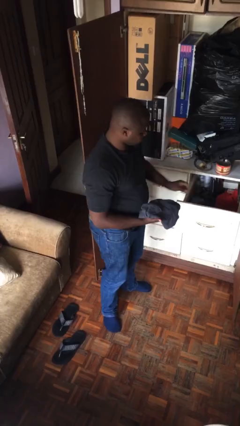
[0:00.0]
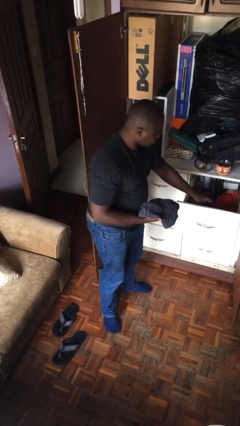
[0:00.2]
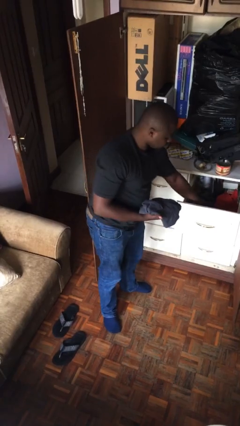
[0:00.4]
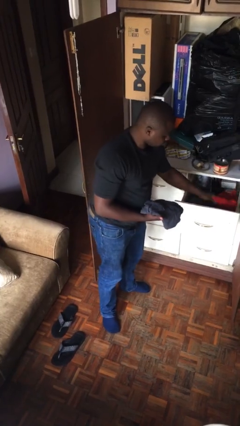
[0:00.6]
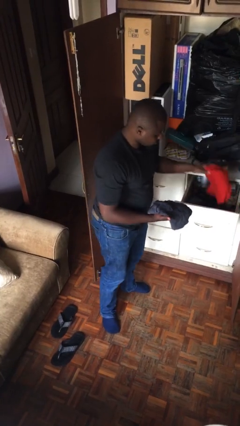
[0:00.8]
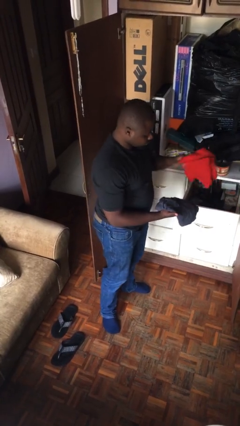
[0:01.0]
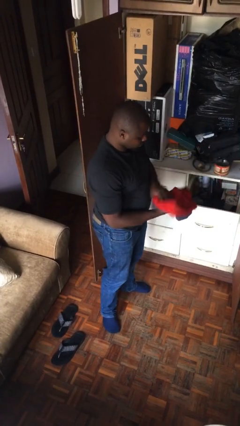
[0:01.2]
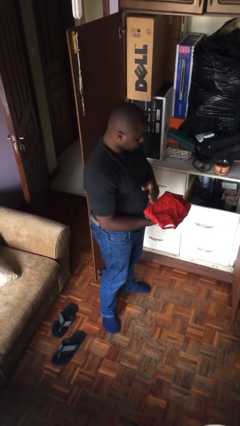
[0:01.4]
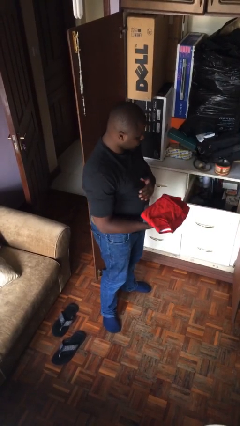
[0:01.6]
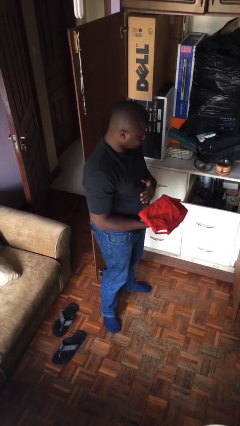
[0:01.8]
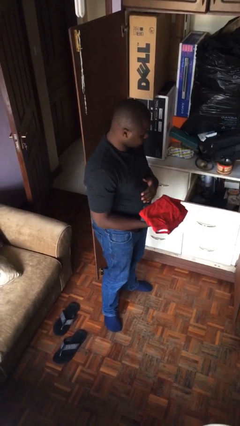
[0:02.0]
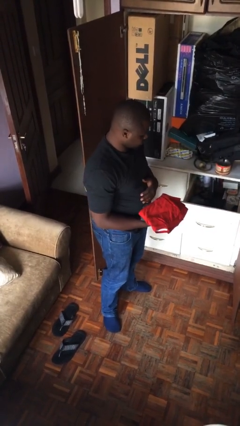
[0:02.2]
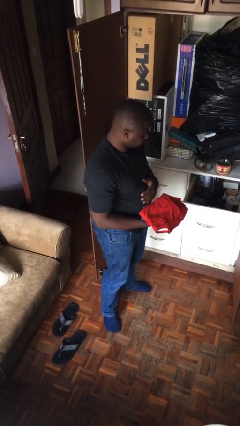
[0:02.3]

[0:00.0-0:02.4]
person takes clothes from dresser

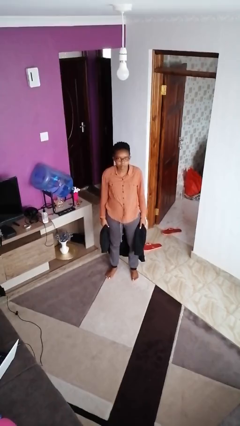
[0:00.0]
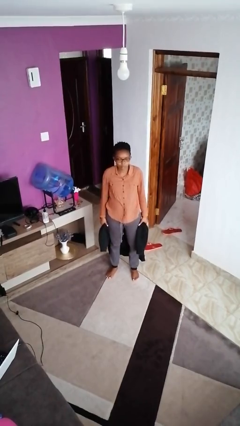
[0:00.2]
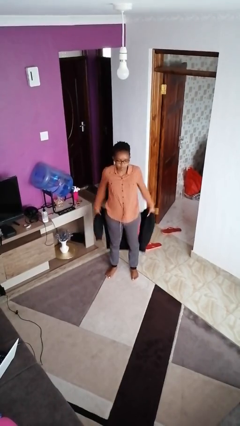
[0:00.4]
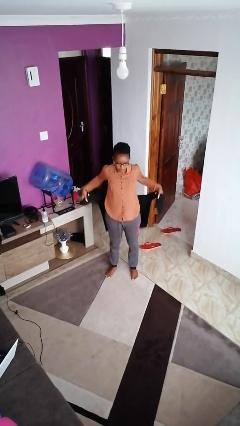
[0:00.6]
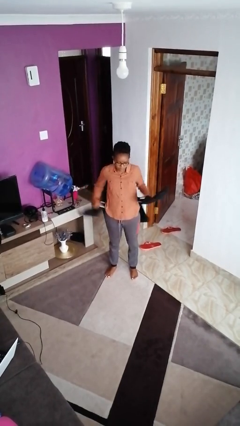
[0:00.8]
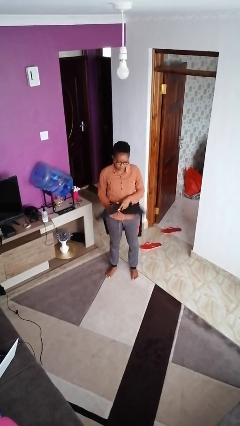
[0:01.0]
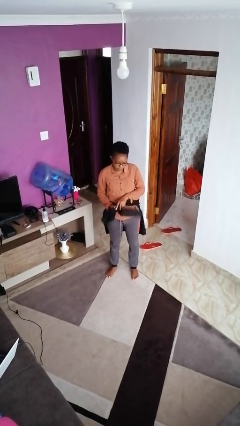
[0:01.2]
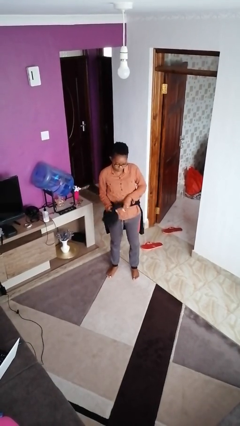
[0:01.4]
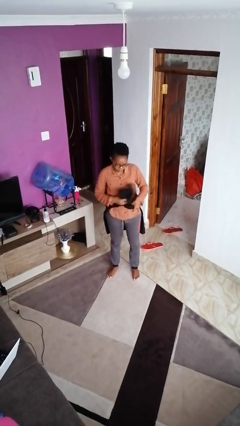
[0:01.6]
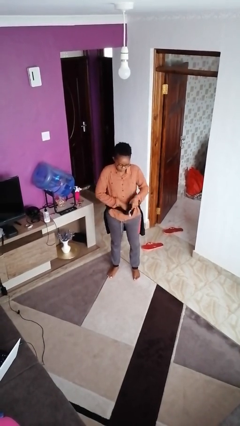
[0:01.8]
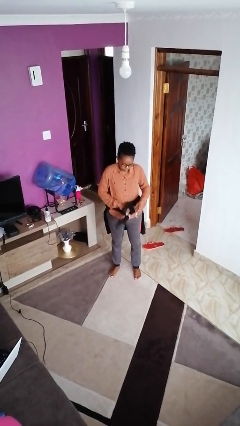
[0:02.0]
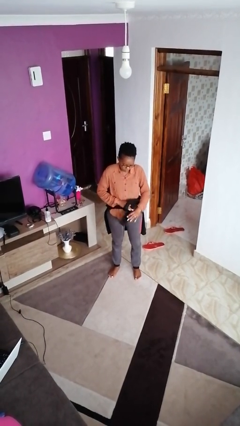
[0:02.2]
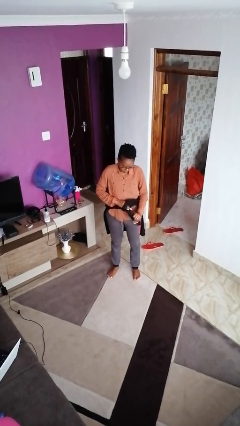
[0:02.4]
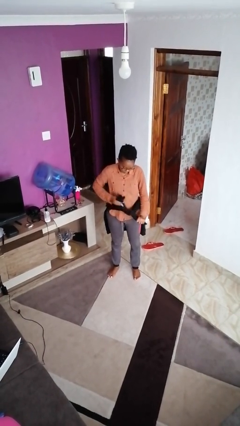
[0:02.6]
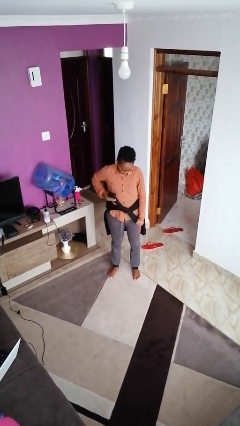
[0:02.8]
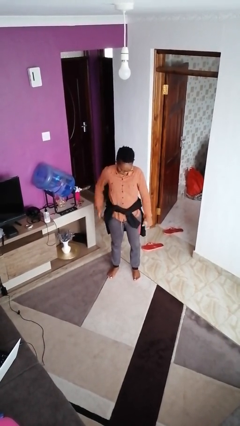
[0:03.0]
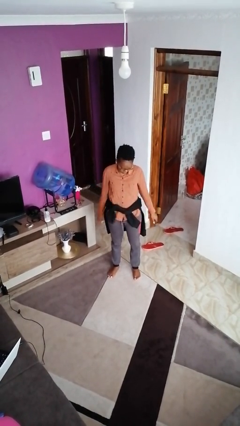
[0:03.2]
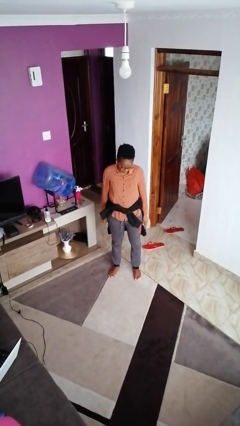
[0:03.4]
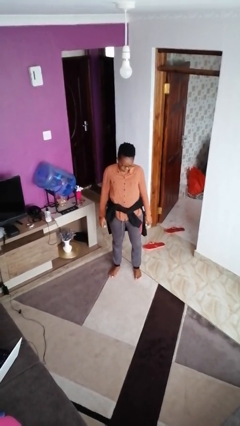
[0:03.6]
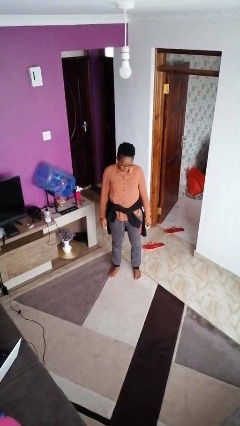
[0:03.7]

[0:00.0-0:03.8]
person ties jacket around waist

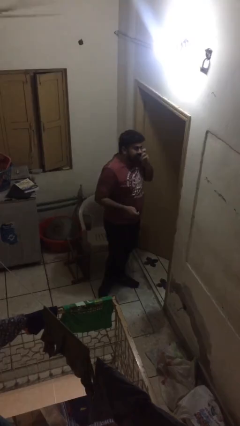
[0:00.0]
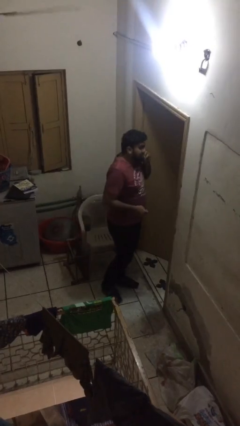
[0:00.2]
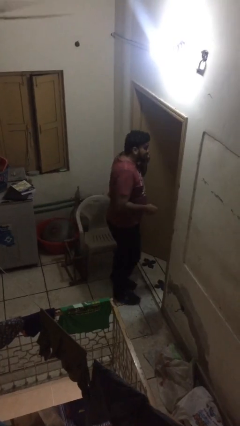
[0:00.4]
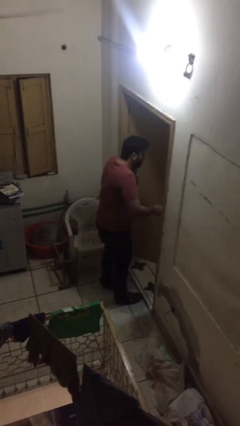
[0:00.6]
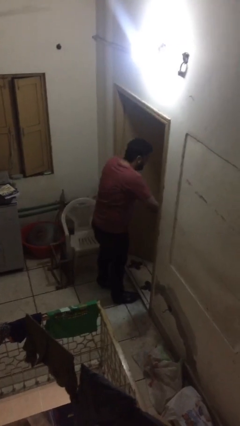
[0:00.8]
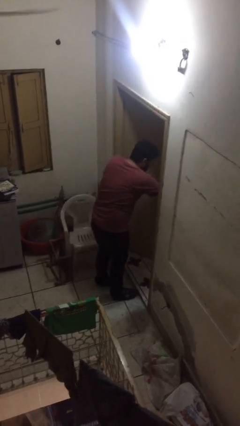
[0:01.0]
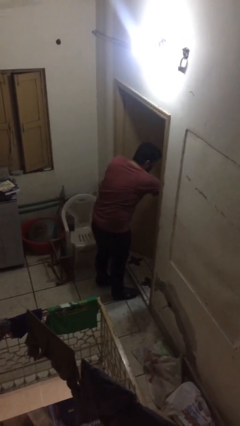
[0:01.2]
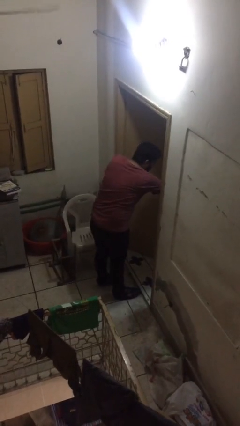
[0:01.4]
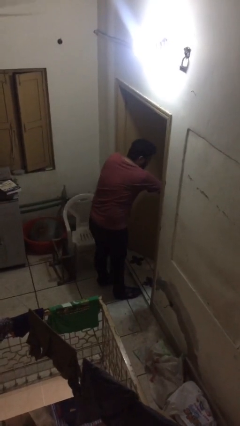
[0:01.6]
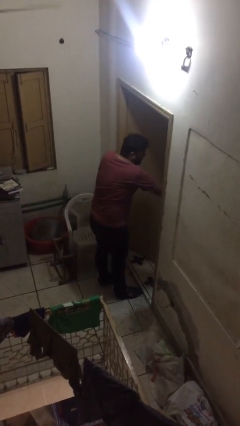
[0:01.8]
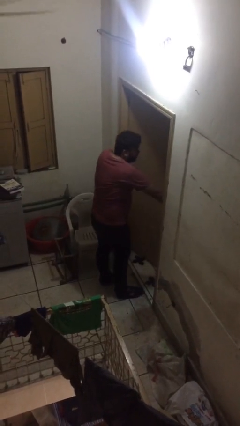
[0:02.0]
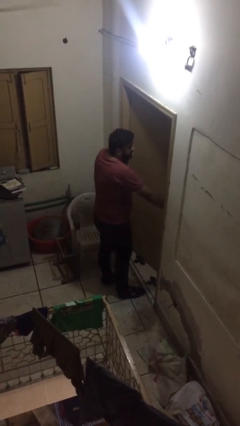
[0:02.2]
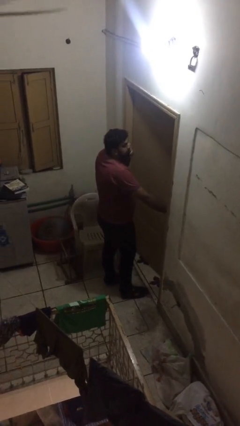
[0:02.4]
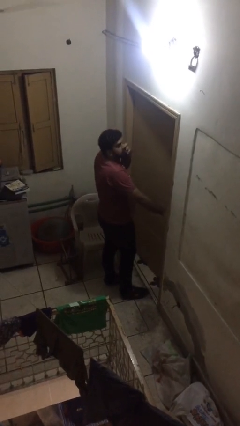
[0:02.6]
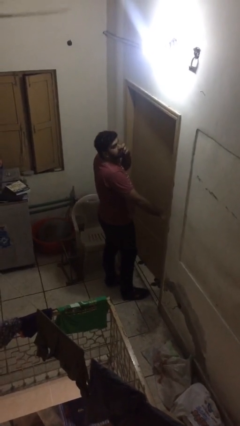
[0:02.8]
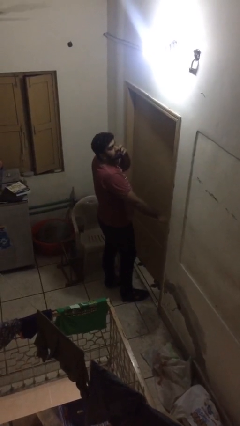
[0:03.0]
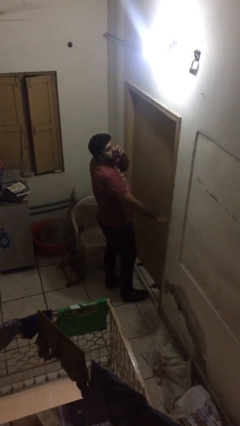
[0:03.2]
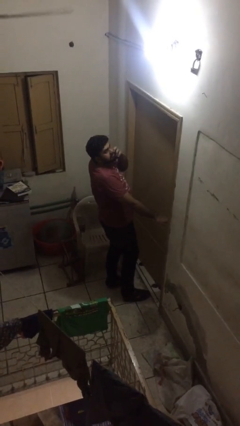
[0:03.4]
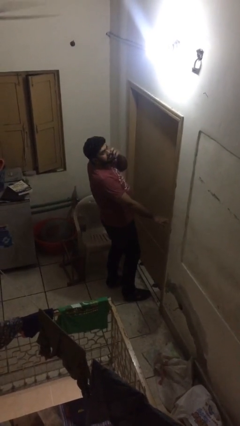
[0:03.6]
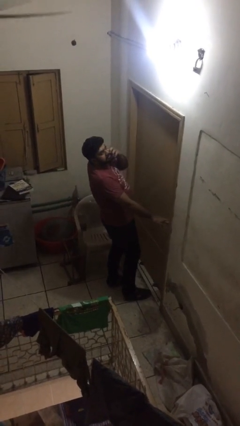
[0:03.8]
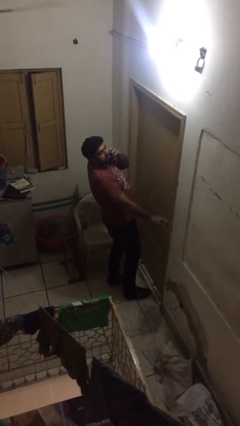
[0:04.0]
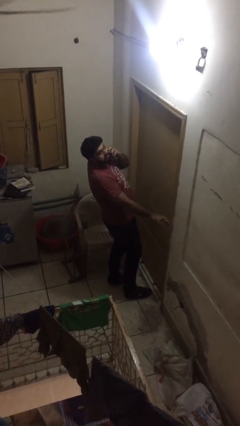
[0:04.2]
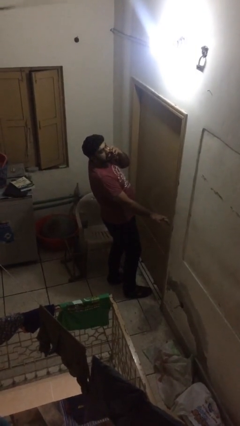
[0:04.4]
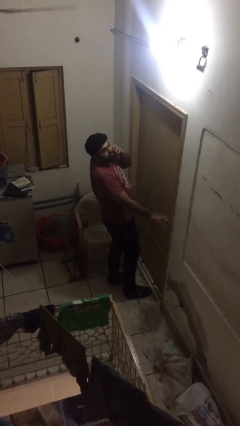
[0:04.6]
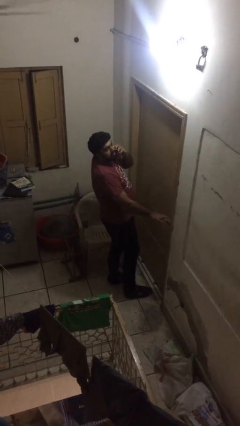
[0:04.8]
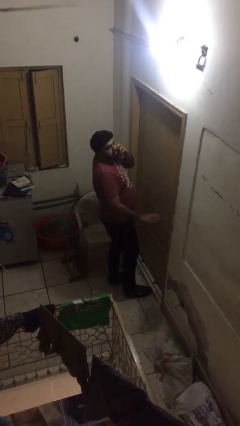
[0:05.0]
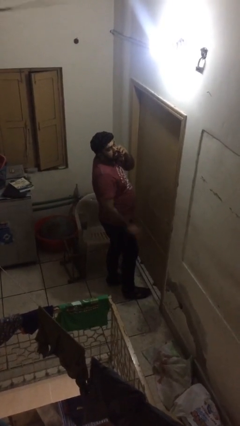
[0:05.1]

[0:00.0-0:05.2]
person closes facility door

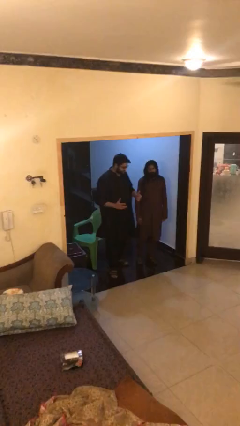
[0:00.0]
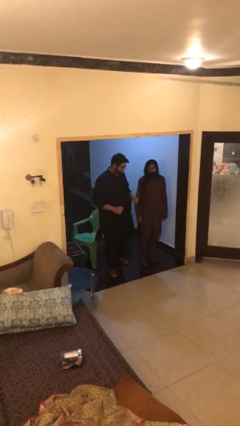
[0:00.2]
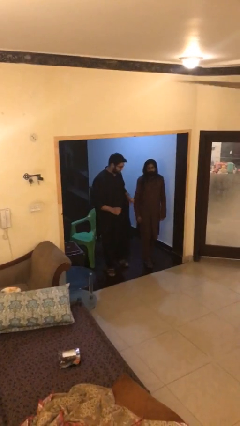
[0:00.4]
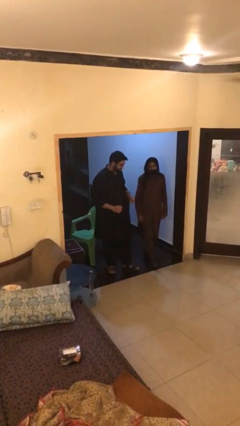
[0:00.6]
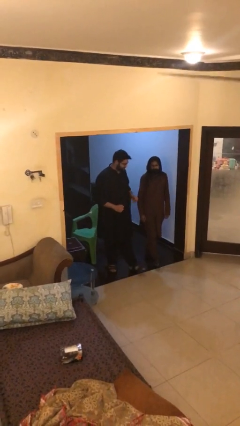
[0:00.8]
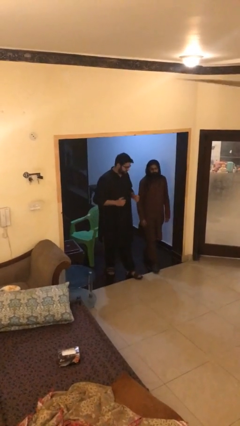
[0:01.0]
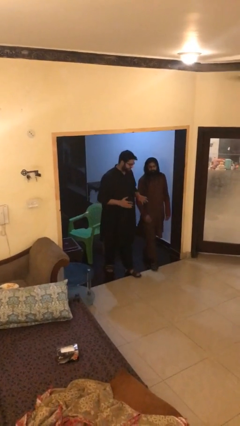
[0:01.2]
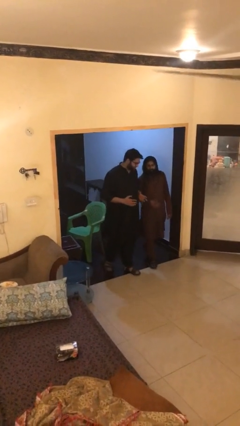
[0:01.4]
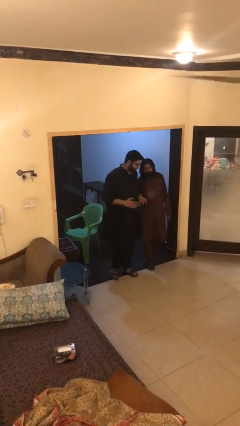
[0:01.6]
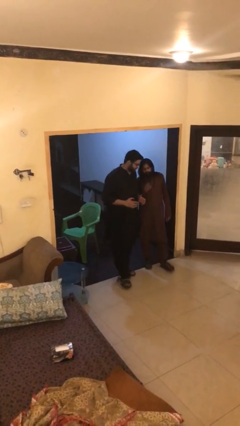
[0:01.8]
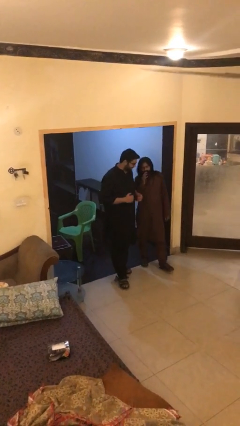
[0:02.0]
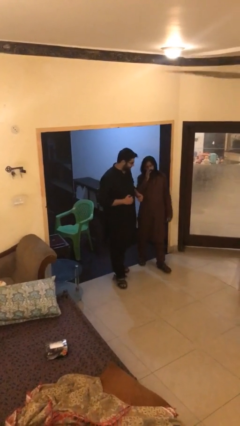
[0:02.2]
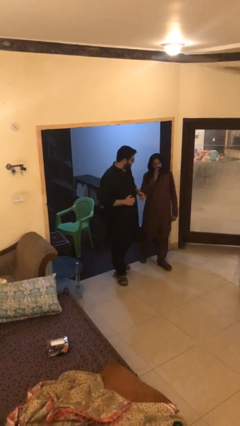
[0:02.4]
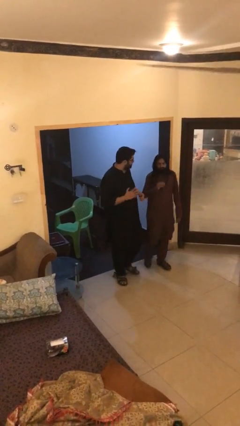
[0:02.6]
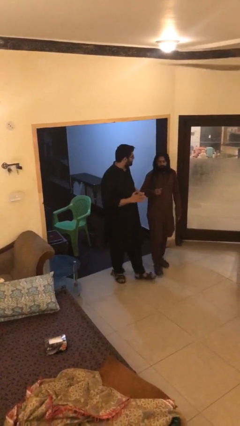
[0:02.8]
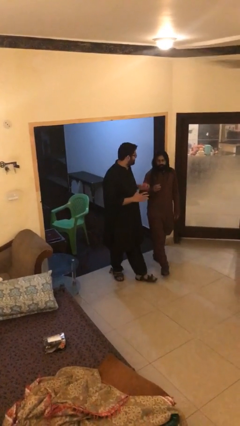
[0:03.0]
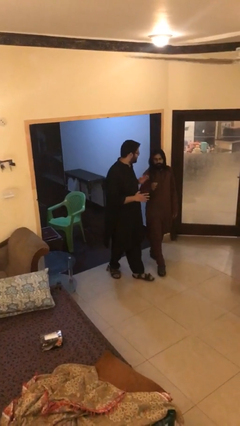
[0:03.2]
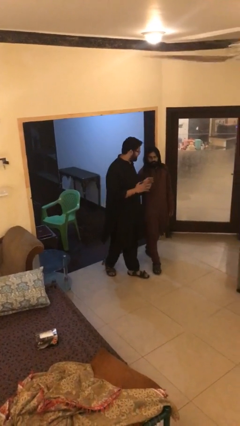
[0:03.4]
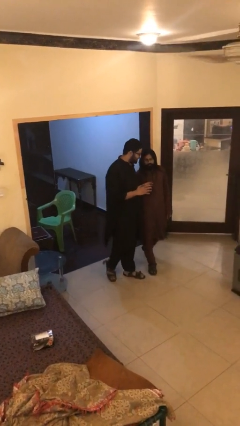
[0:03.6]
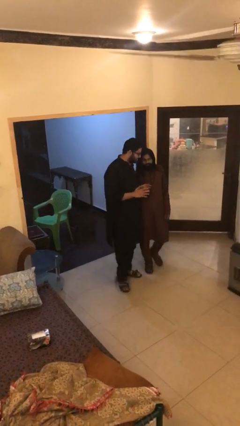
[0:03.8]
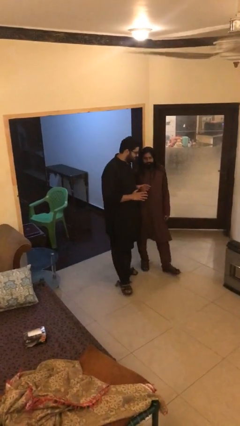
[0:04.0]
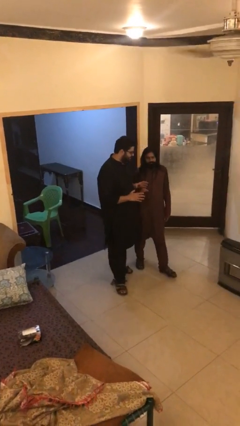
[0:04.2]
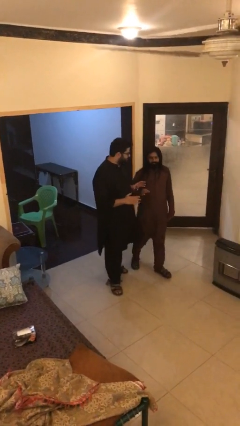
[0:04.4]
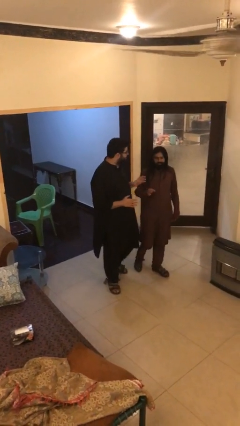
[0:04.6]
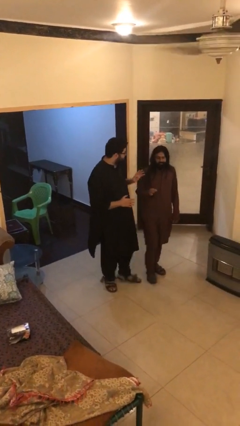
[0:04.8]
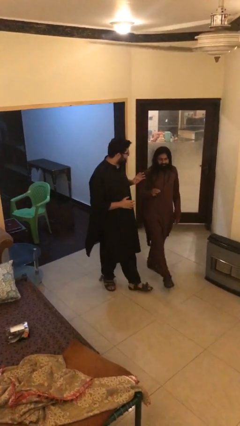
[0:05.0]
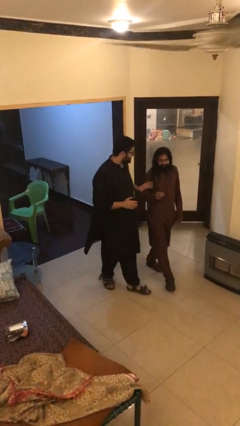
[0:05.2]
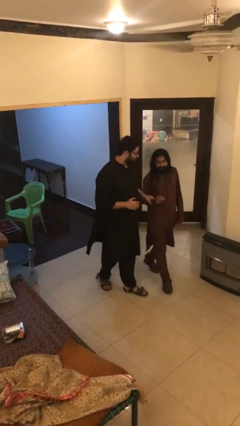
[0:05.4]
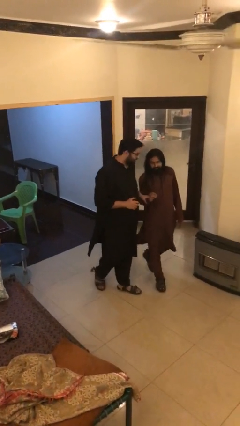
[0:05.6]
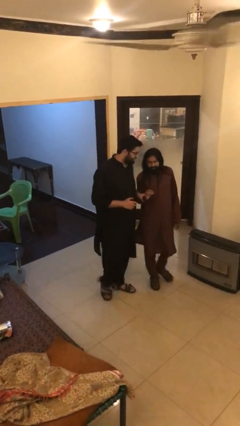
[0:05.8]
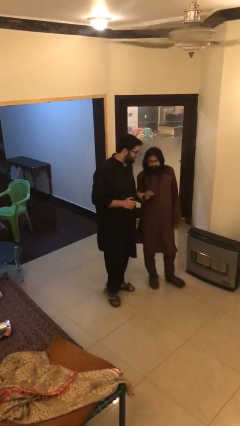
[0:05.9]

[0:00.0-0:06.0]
person talks to person

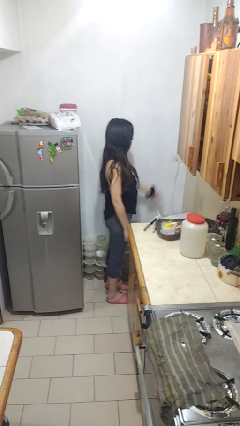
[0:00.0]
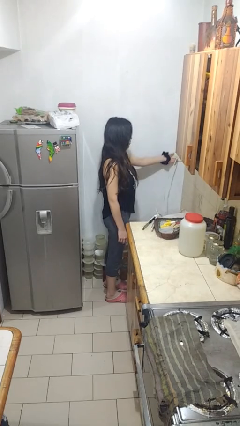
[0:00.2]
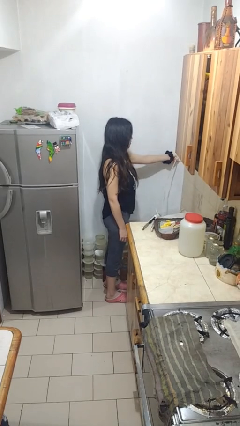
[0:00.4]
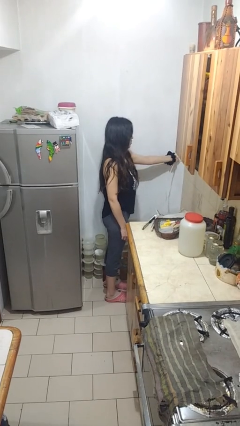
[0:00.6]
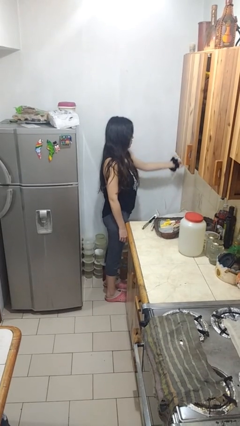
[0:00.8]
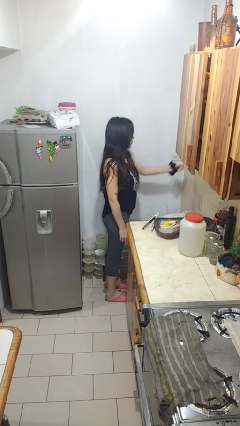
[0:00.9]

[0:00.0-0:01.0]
person unplugs from electrical socket
